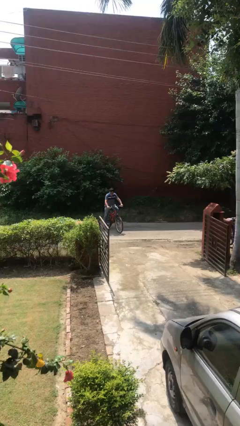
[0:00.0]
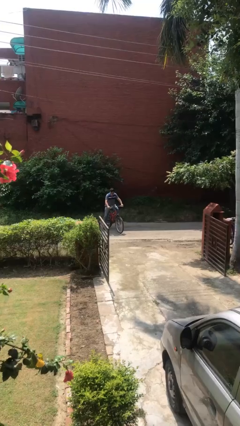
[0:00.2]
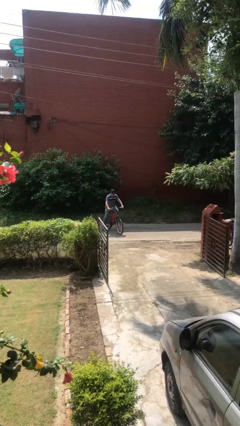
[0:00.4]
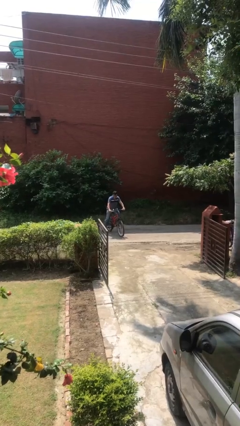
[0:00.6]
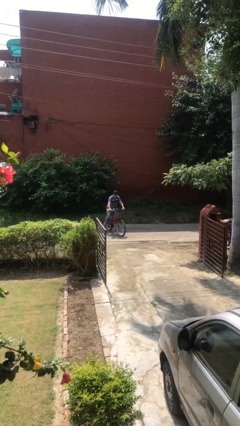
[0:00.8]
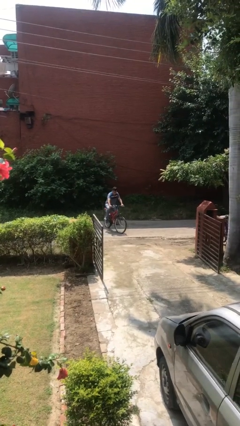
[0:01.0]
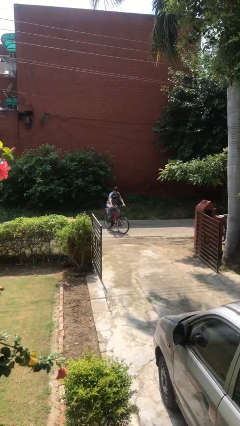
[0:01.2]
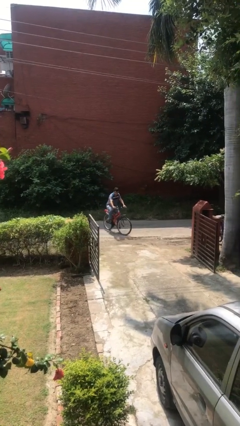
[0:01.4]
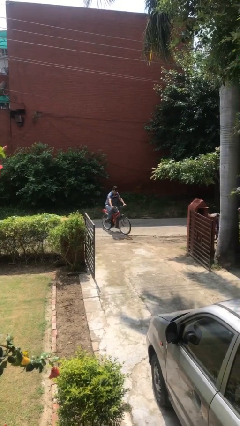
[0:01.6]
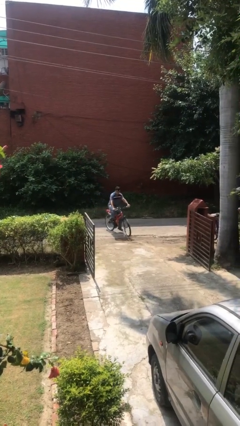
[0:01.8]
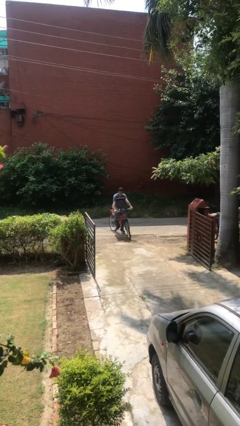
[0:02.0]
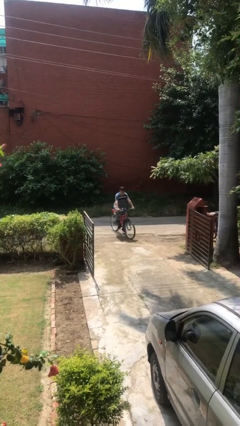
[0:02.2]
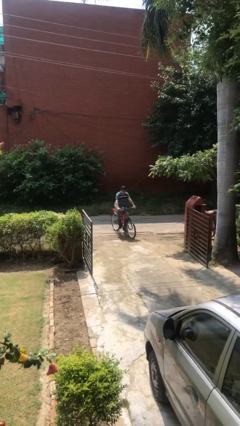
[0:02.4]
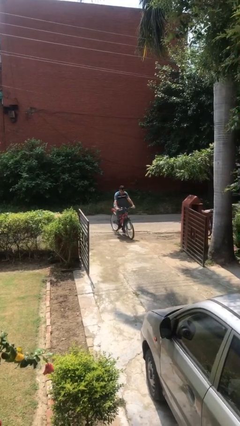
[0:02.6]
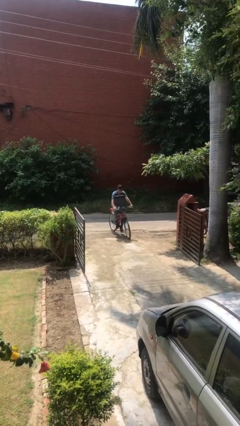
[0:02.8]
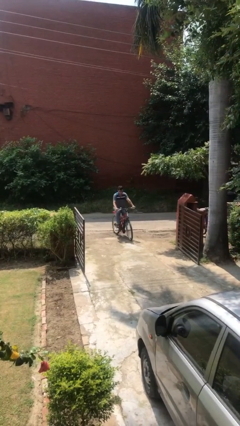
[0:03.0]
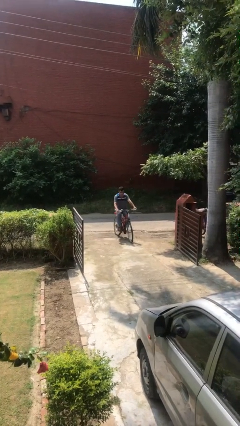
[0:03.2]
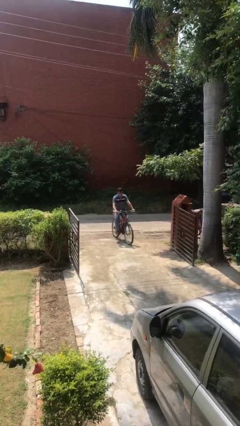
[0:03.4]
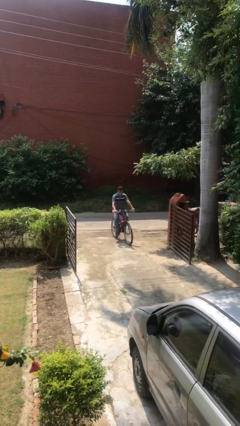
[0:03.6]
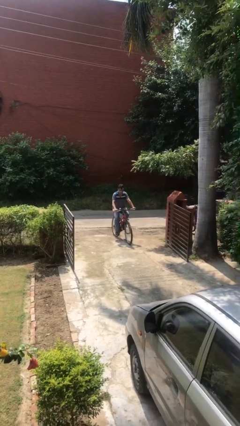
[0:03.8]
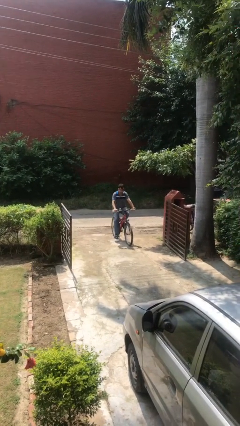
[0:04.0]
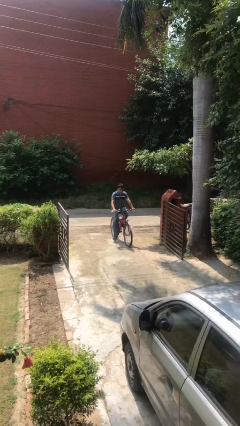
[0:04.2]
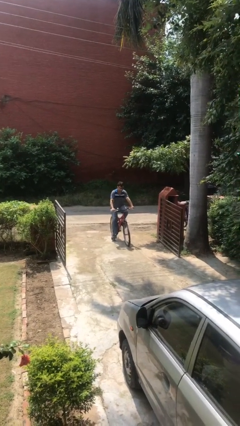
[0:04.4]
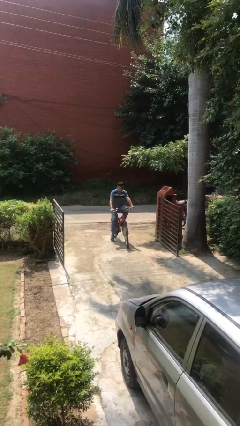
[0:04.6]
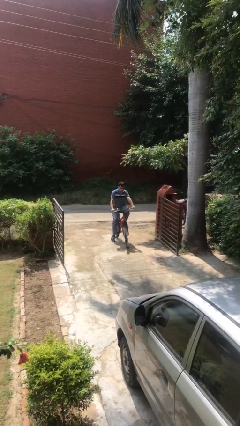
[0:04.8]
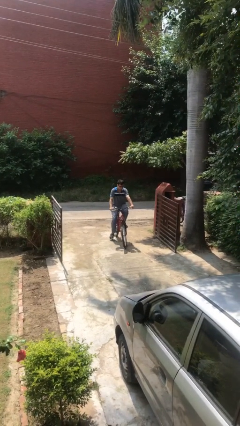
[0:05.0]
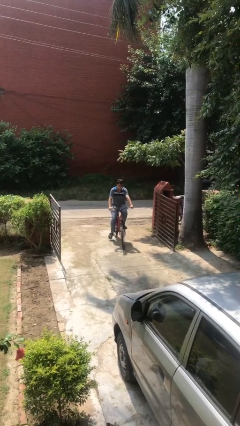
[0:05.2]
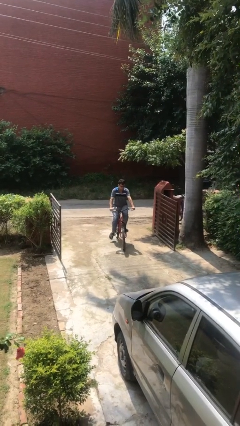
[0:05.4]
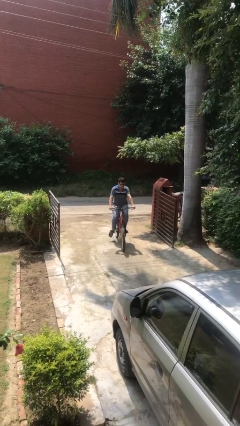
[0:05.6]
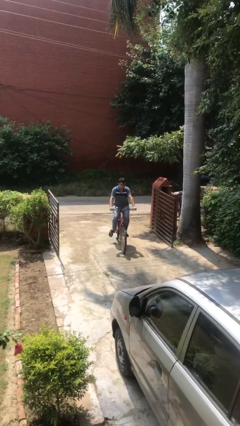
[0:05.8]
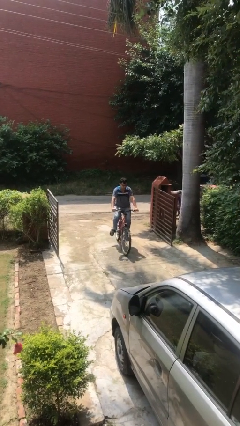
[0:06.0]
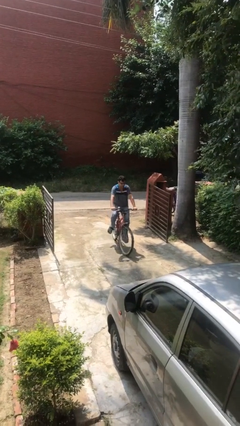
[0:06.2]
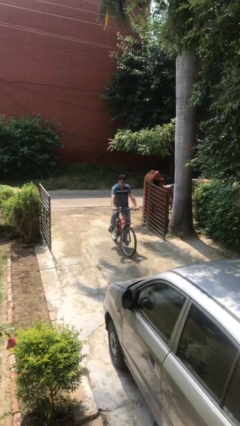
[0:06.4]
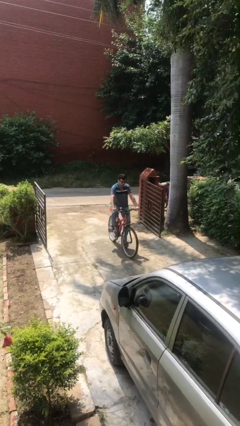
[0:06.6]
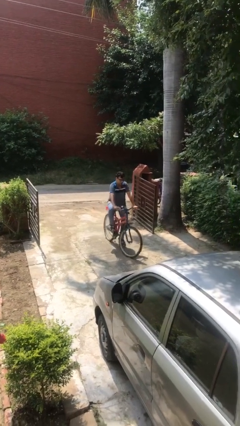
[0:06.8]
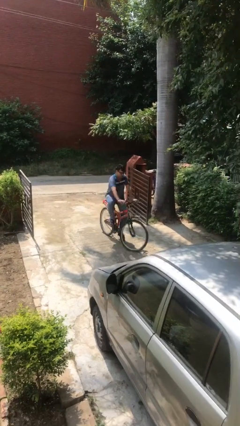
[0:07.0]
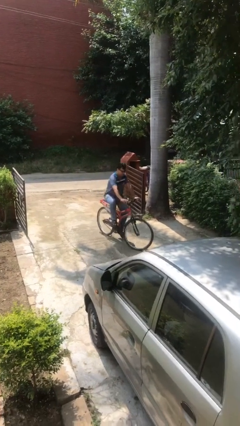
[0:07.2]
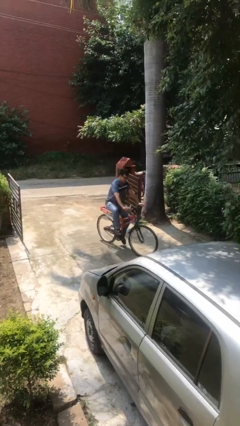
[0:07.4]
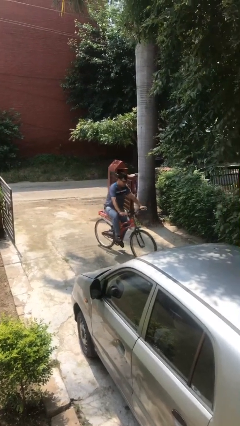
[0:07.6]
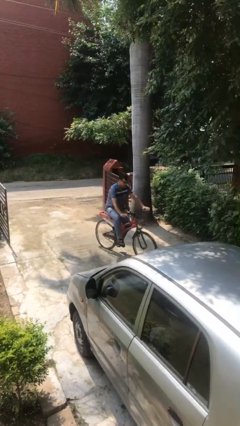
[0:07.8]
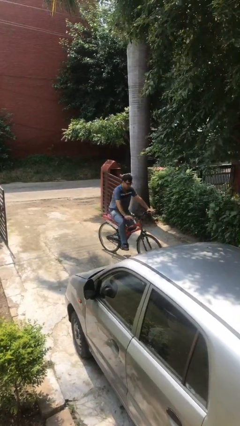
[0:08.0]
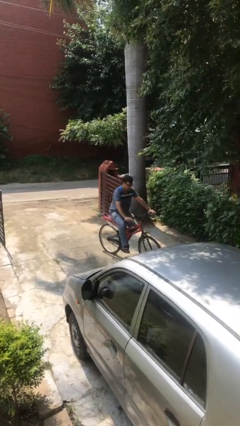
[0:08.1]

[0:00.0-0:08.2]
person rides bicycle

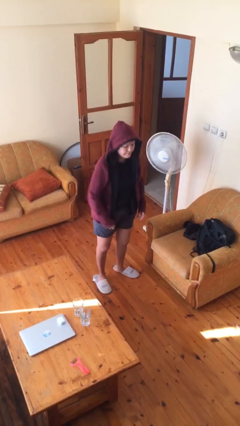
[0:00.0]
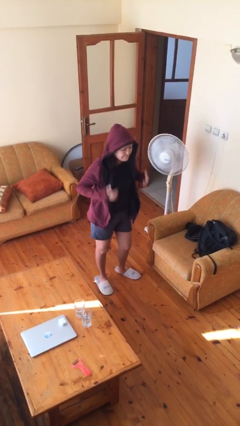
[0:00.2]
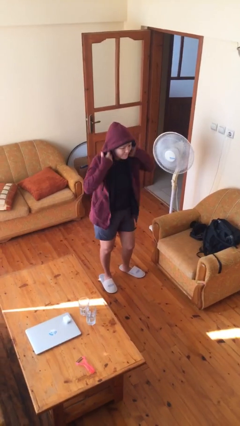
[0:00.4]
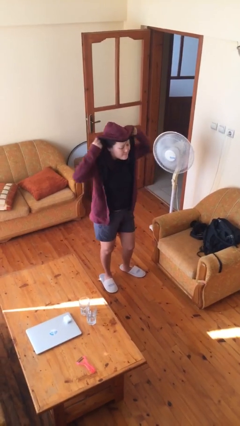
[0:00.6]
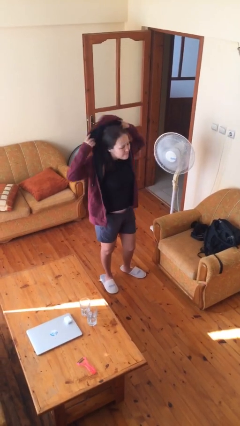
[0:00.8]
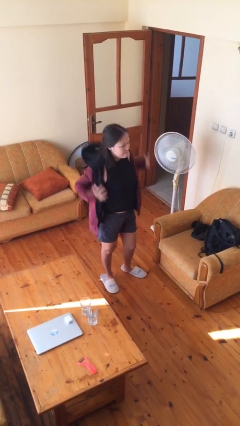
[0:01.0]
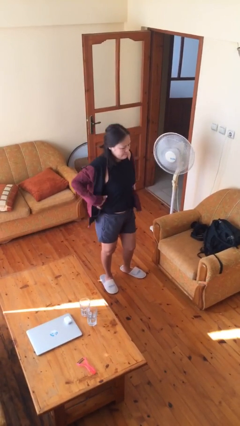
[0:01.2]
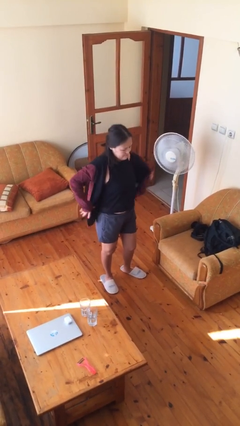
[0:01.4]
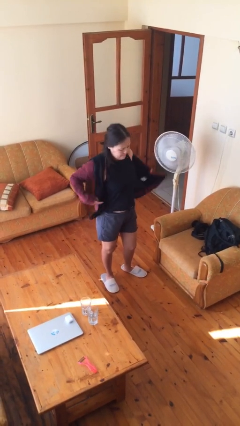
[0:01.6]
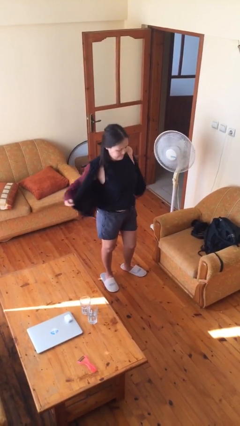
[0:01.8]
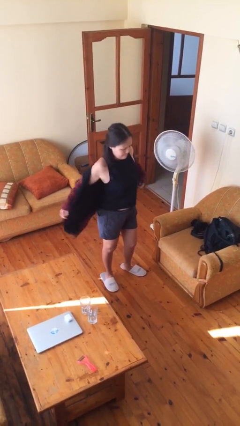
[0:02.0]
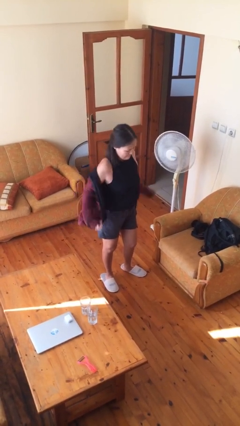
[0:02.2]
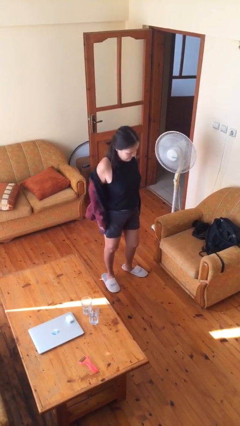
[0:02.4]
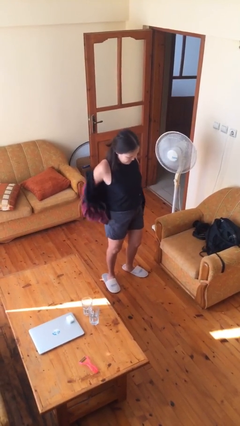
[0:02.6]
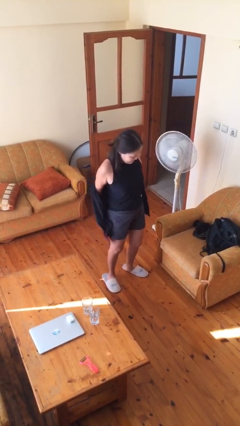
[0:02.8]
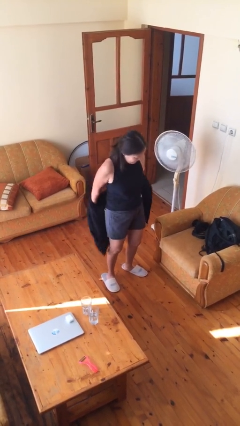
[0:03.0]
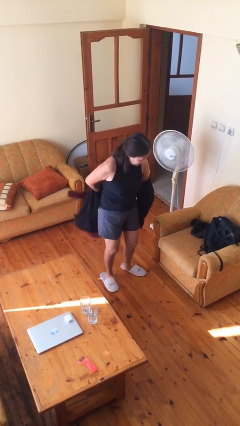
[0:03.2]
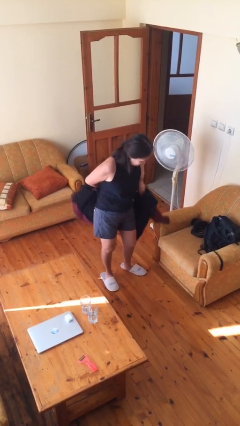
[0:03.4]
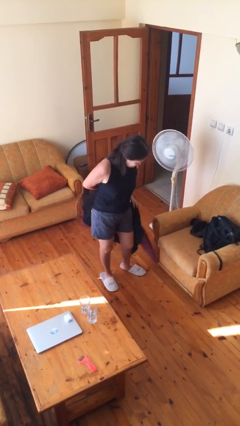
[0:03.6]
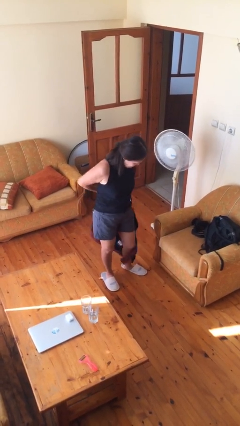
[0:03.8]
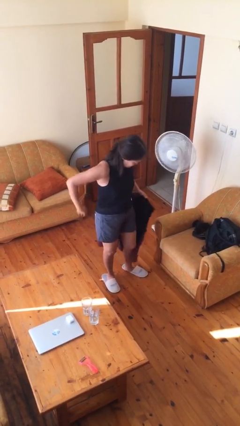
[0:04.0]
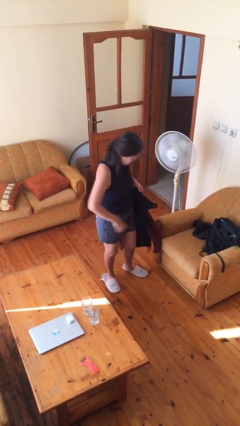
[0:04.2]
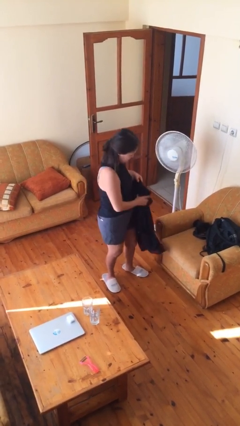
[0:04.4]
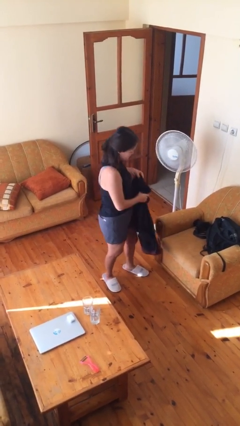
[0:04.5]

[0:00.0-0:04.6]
person takes off hoodie

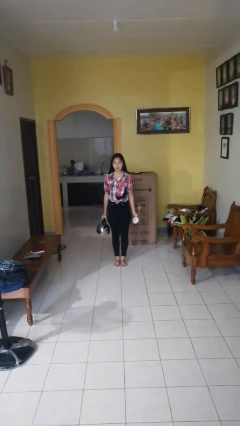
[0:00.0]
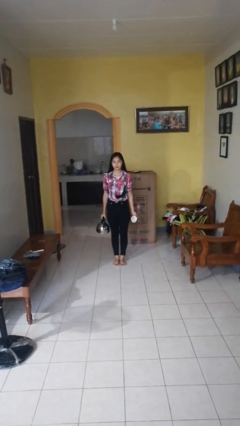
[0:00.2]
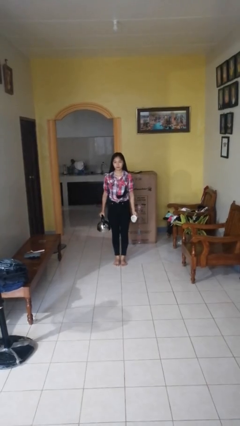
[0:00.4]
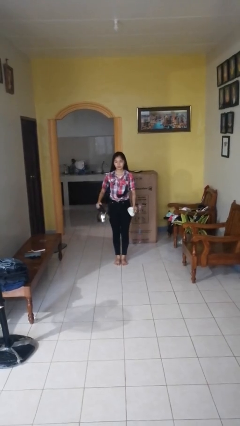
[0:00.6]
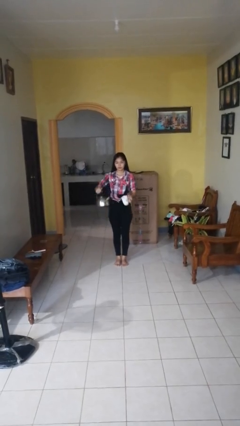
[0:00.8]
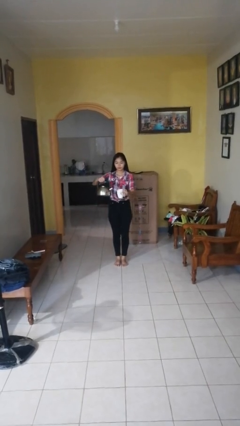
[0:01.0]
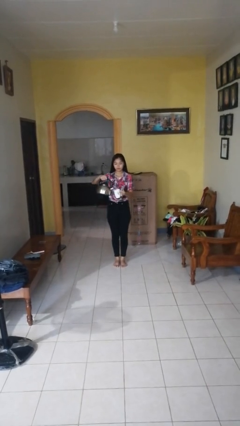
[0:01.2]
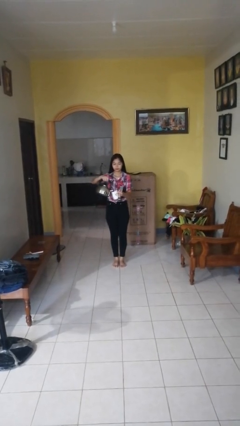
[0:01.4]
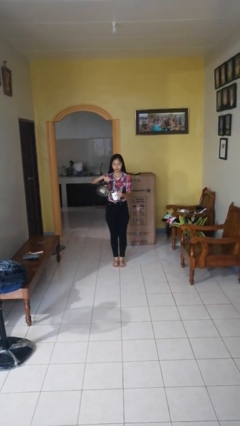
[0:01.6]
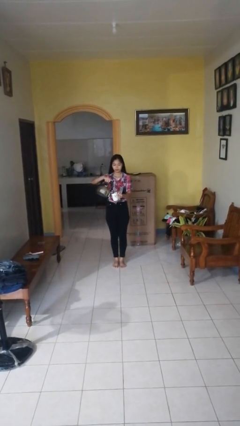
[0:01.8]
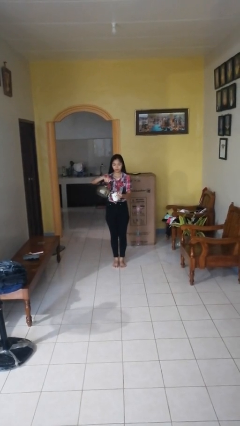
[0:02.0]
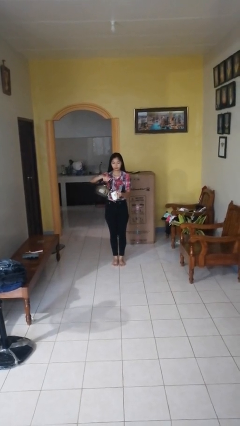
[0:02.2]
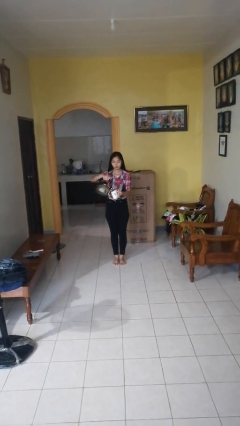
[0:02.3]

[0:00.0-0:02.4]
person pours coffee into mug

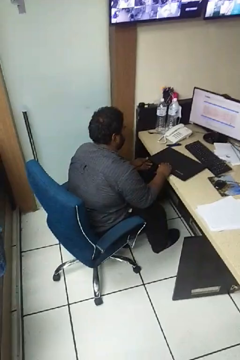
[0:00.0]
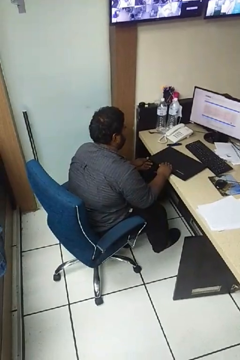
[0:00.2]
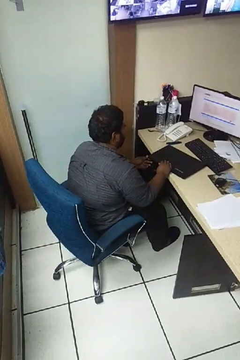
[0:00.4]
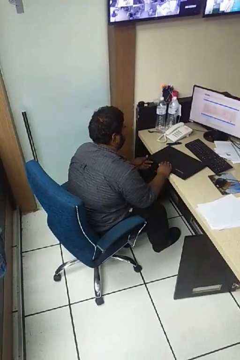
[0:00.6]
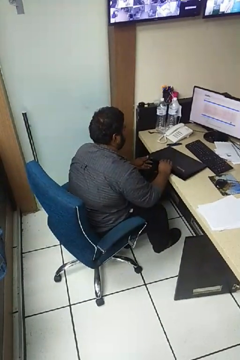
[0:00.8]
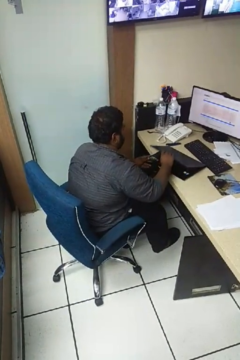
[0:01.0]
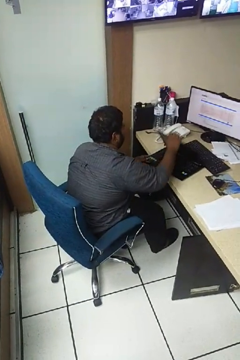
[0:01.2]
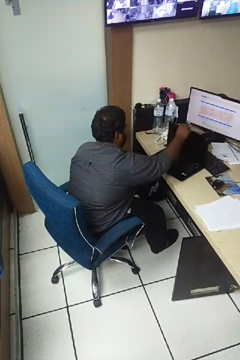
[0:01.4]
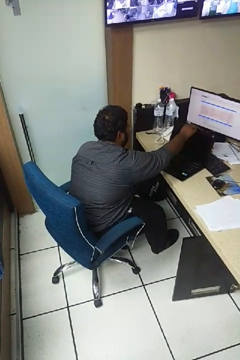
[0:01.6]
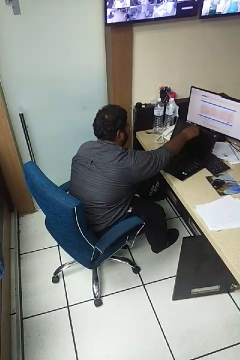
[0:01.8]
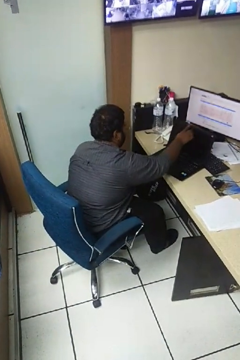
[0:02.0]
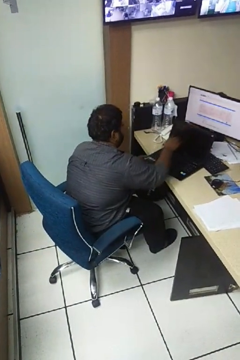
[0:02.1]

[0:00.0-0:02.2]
person opens laptop

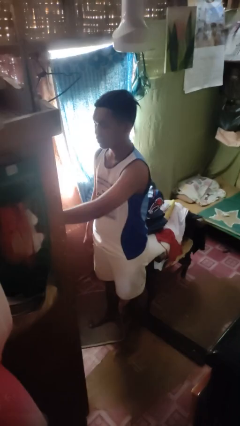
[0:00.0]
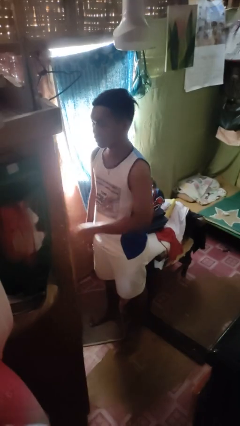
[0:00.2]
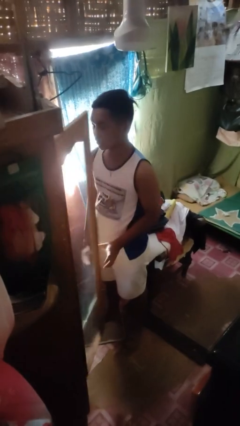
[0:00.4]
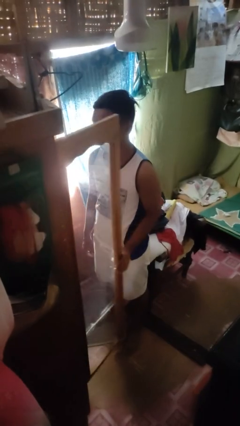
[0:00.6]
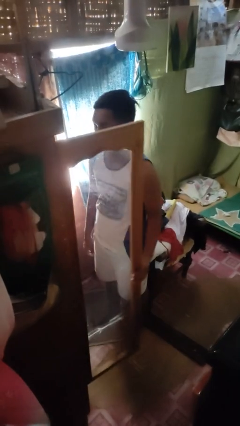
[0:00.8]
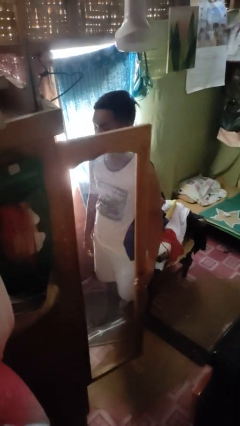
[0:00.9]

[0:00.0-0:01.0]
person opens closet door
